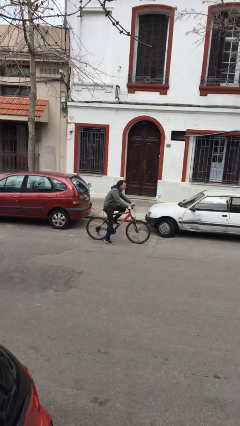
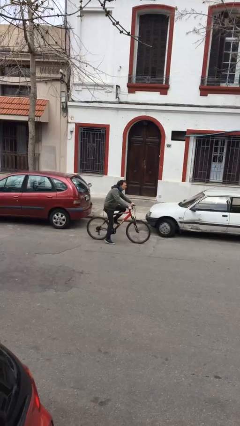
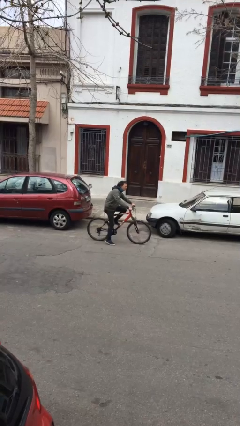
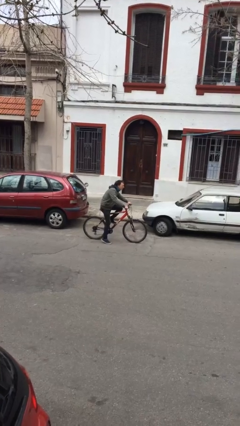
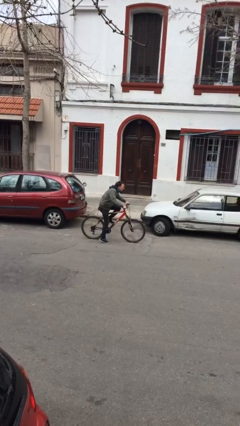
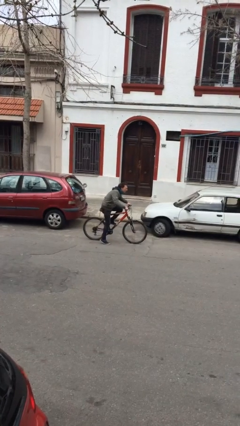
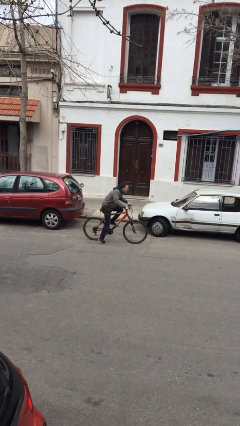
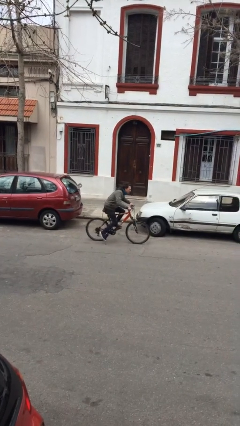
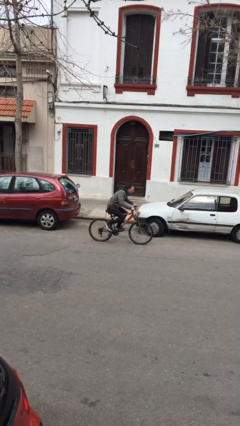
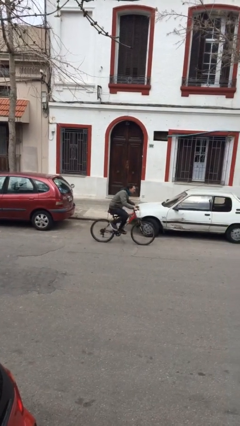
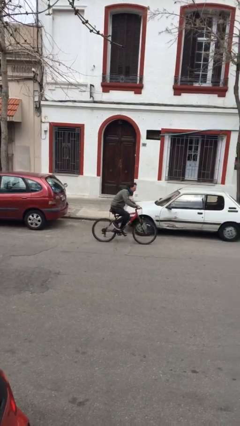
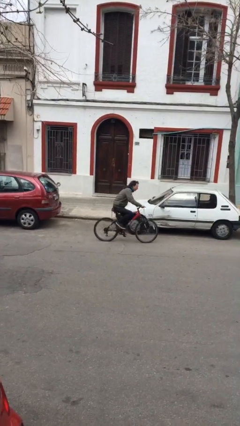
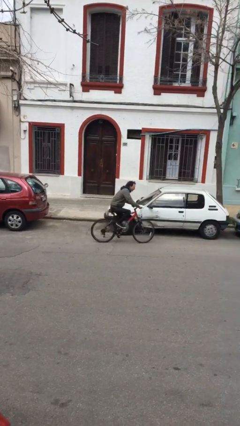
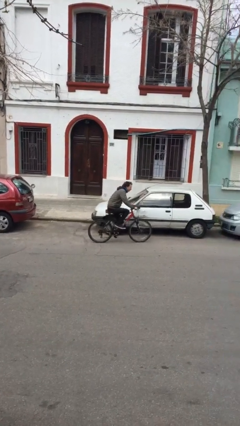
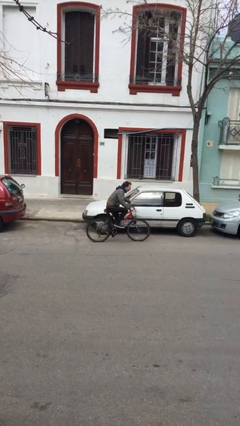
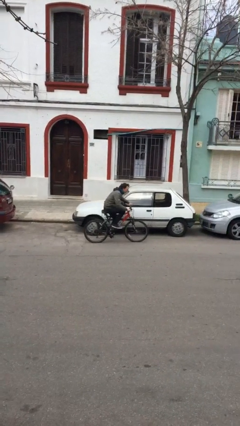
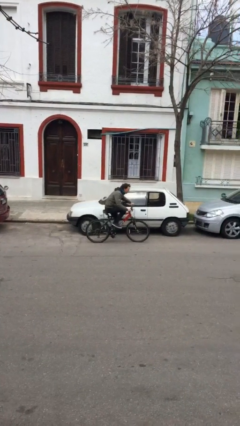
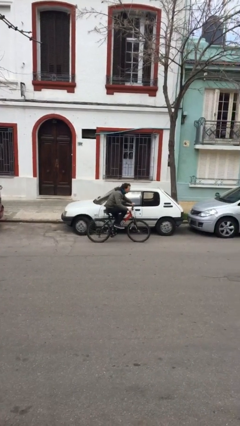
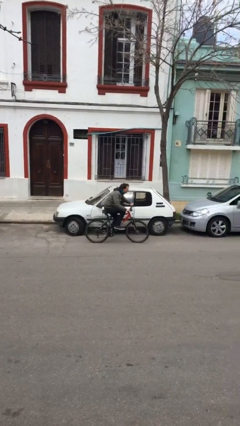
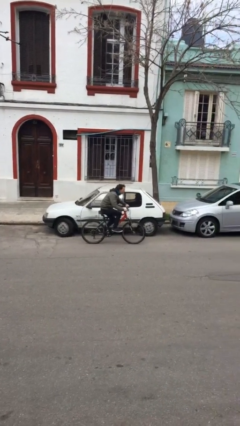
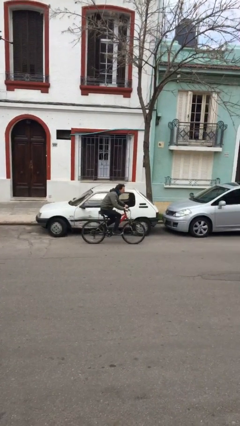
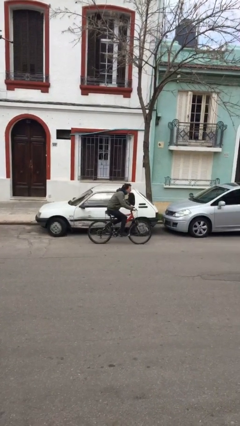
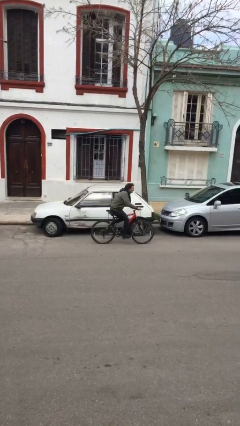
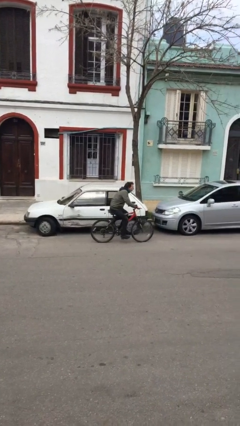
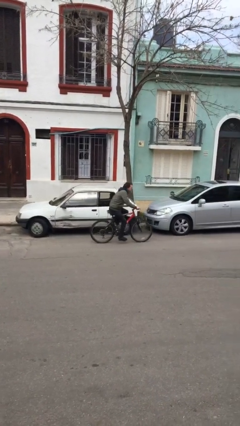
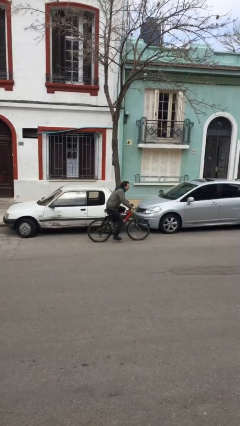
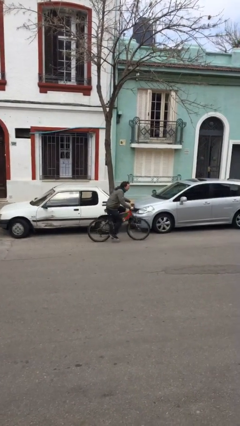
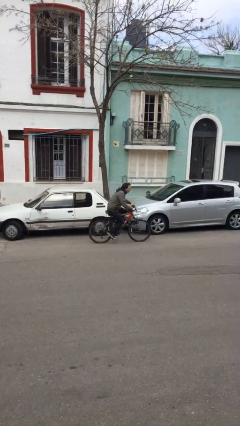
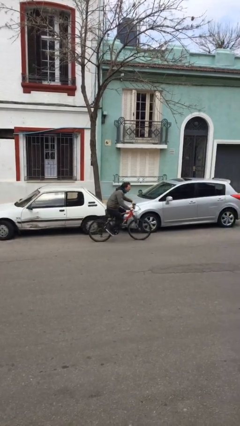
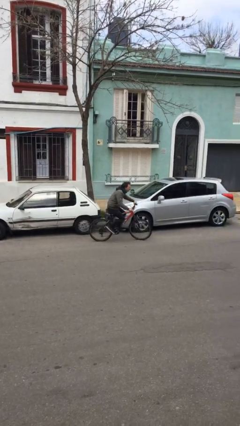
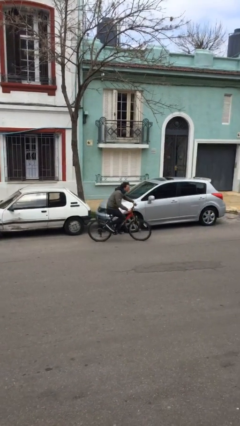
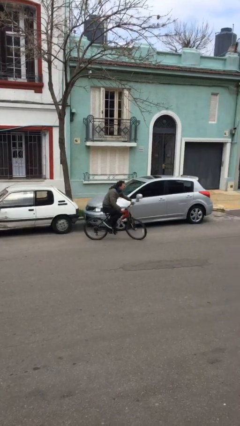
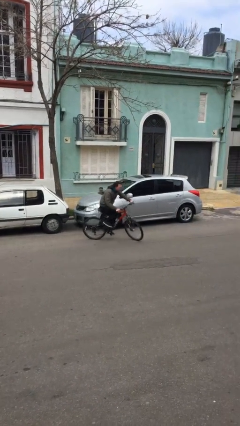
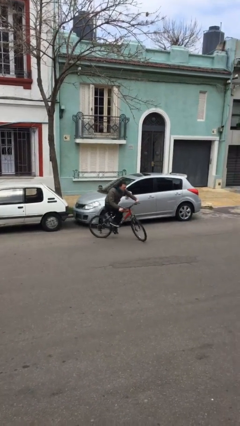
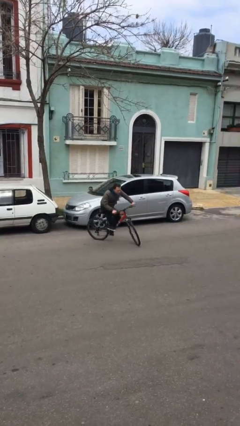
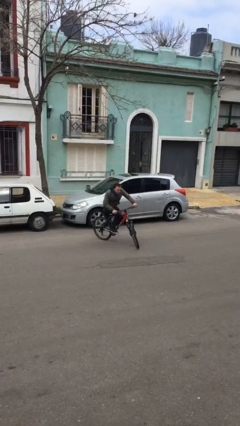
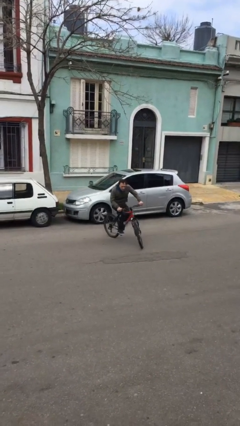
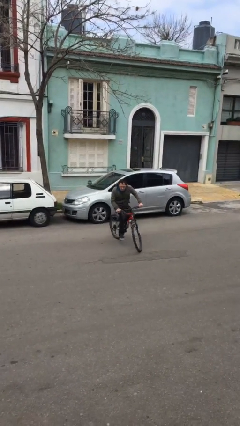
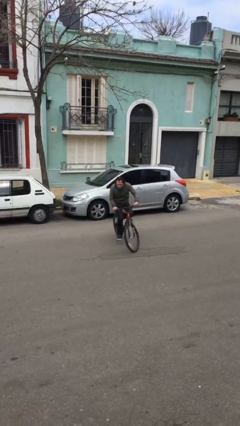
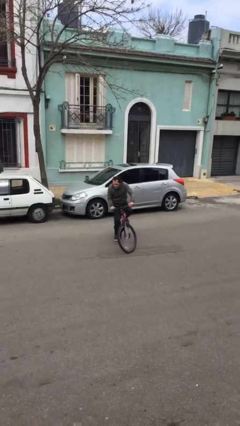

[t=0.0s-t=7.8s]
person rides bicycle

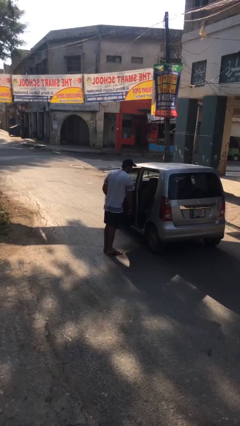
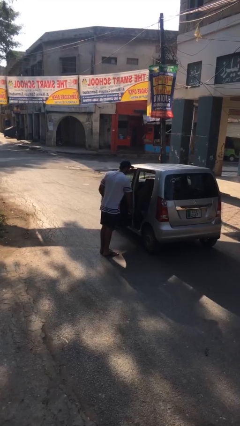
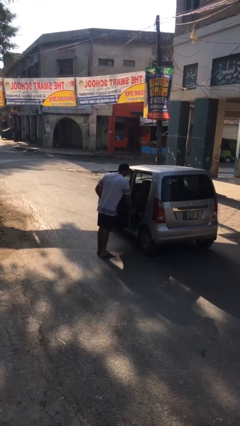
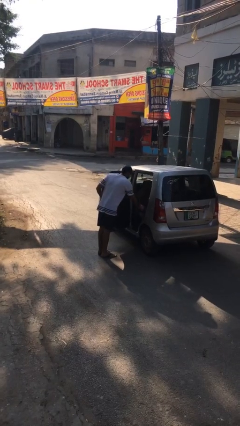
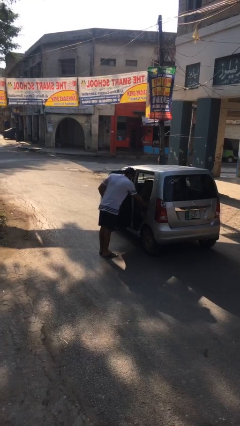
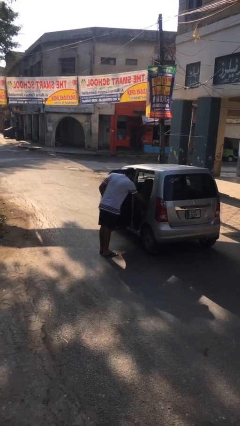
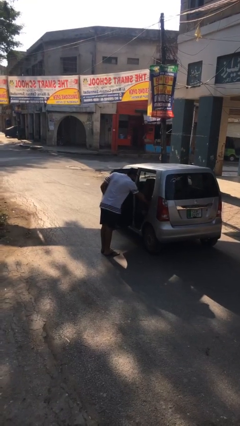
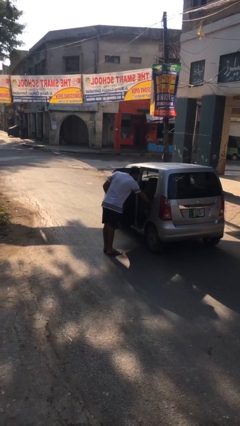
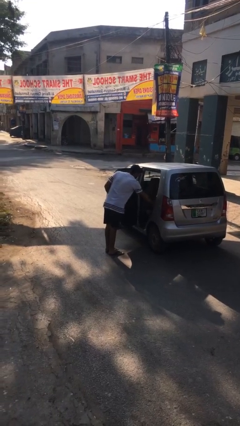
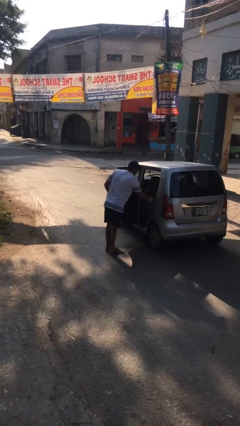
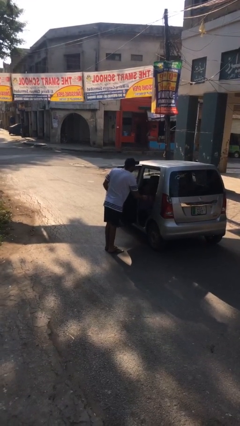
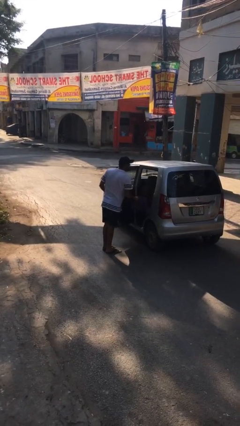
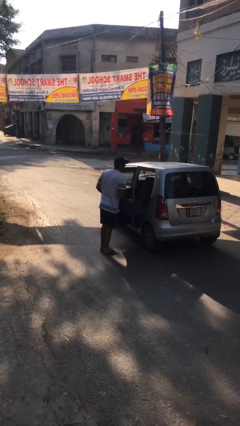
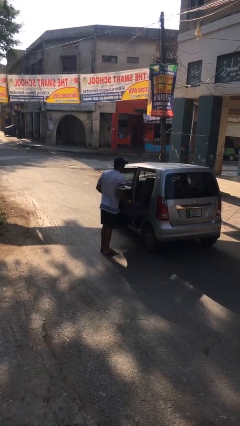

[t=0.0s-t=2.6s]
person unloads car

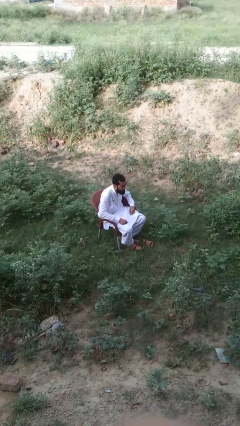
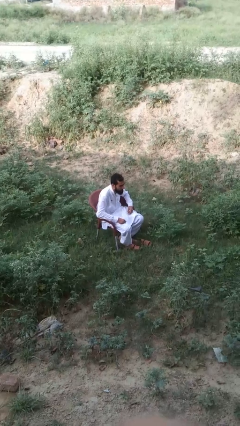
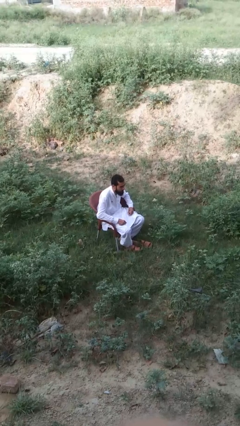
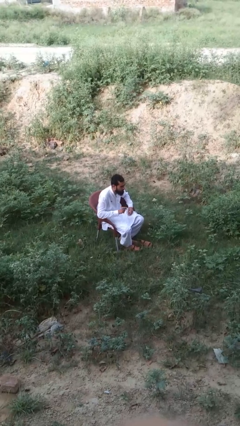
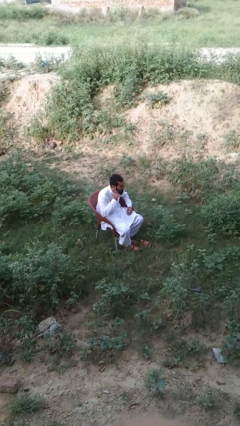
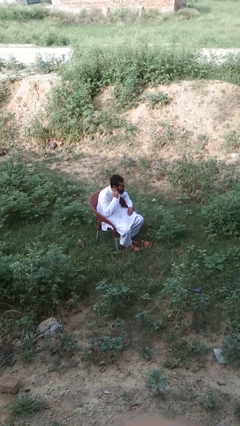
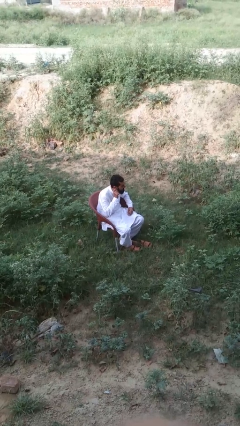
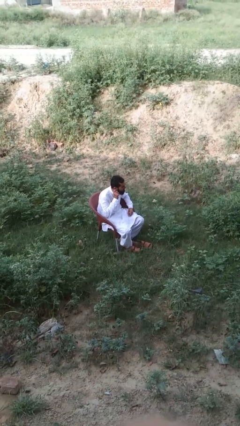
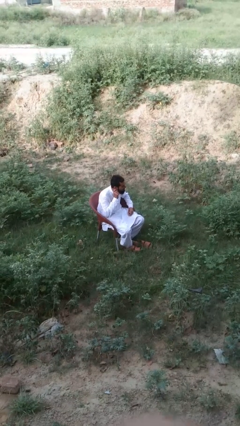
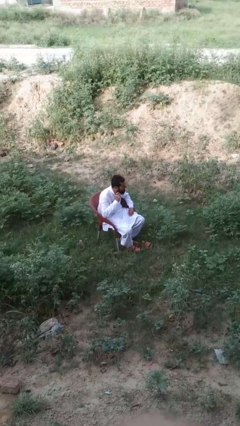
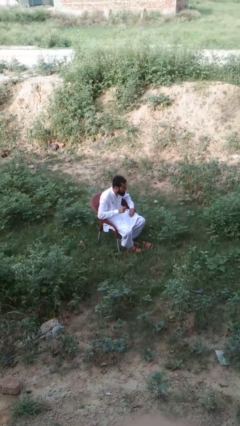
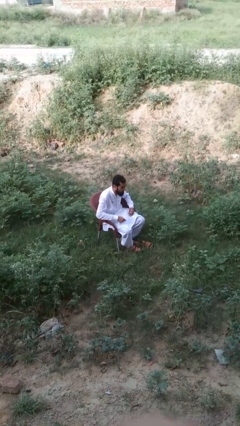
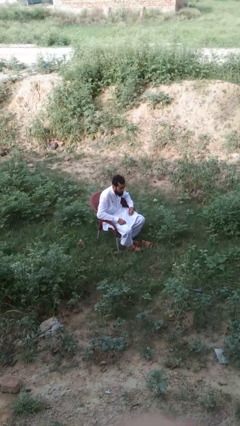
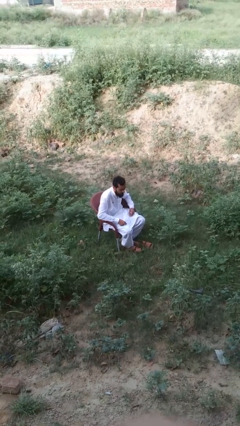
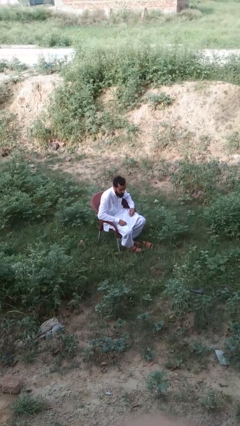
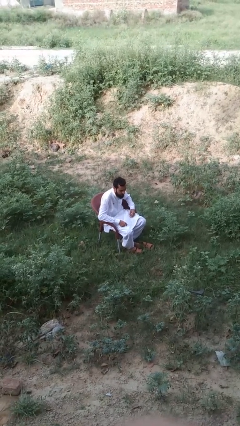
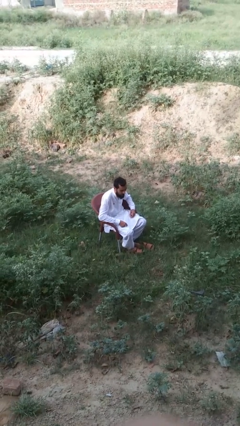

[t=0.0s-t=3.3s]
person touches earlobe

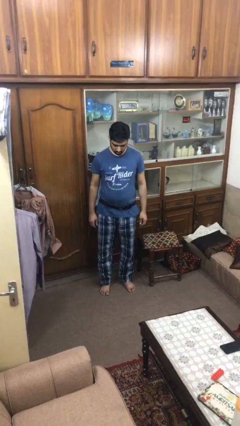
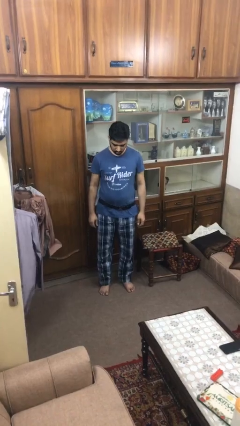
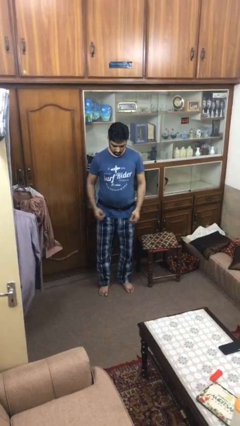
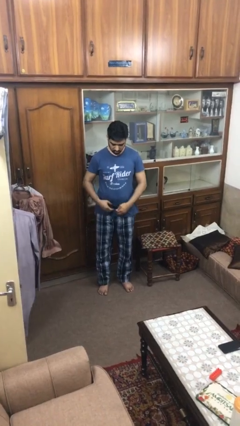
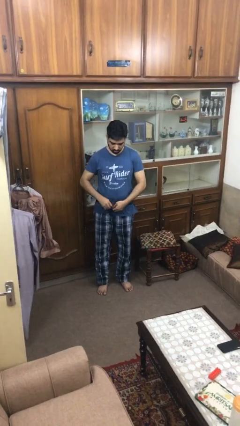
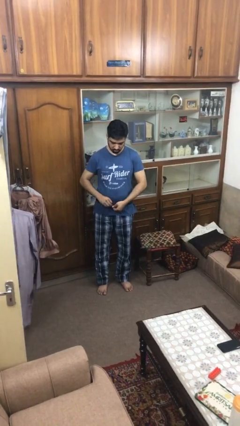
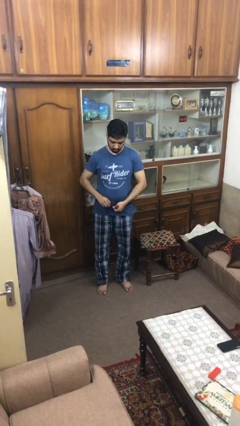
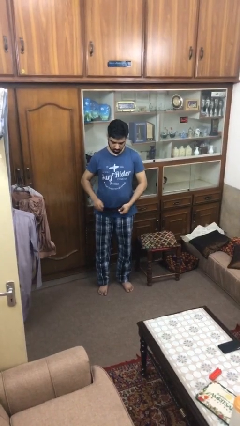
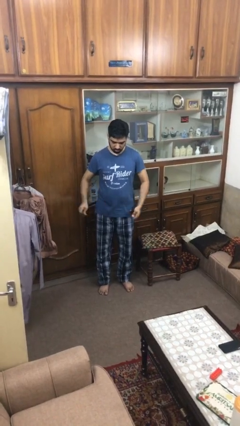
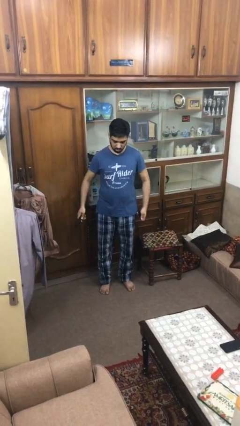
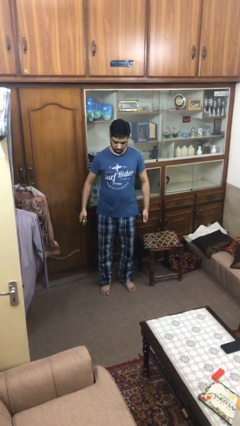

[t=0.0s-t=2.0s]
person takes off belt

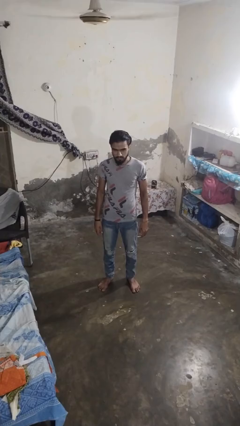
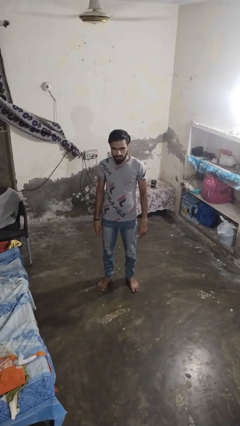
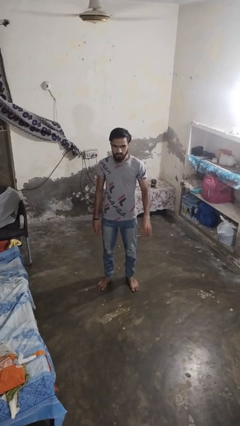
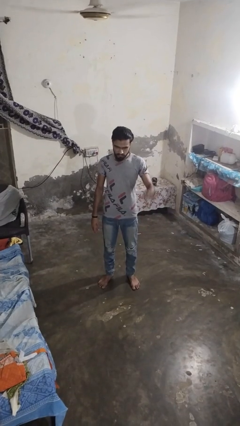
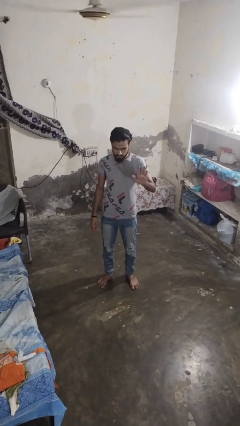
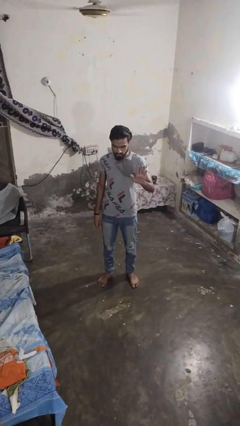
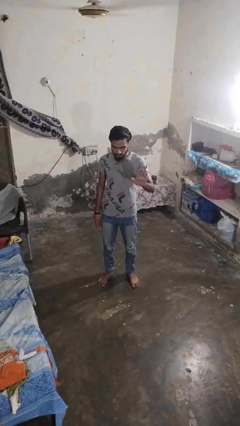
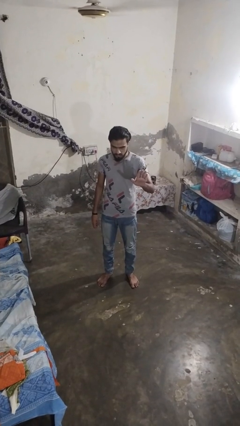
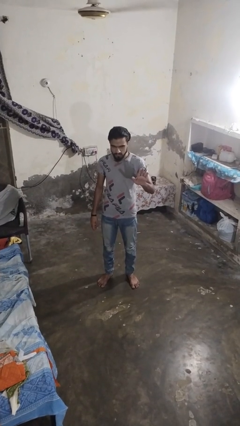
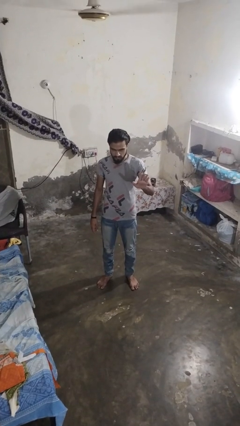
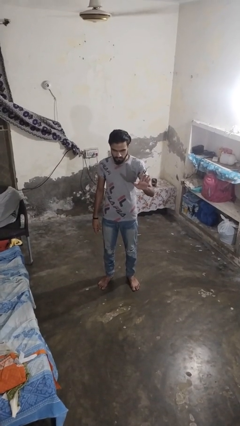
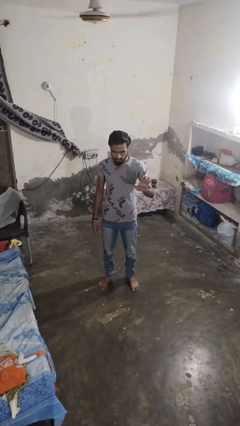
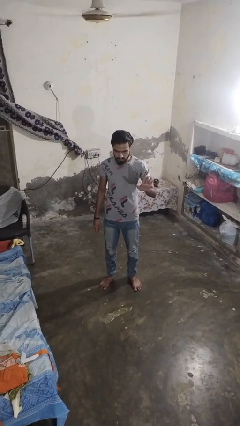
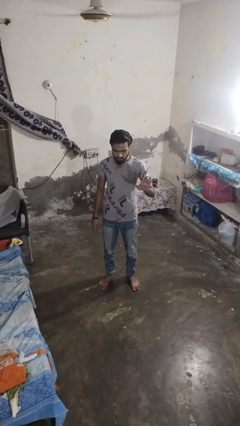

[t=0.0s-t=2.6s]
person gestures stop
